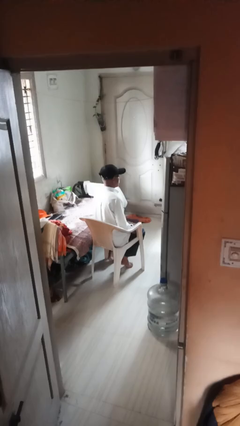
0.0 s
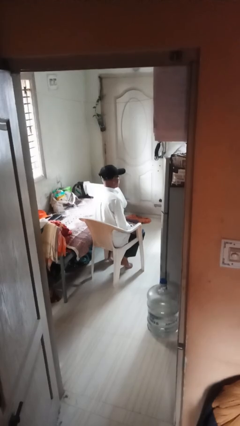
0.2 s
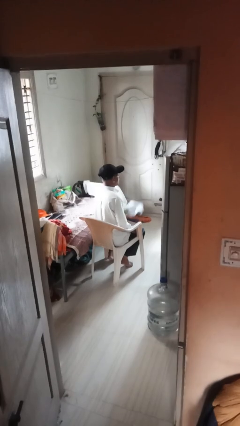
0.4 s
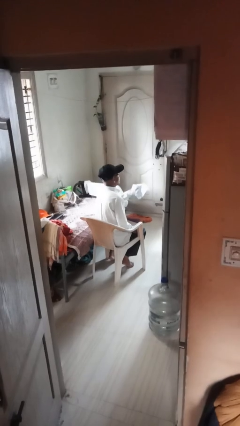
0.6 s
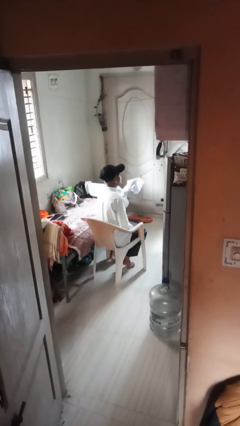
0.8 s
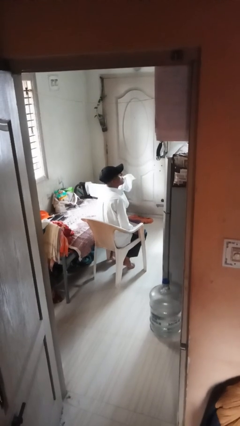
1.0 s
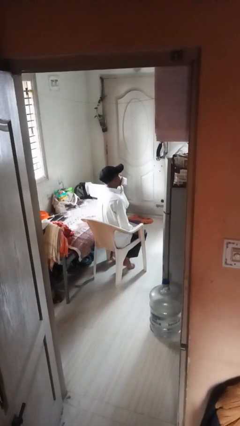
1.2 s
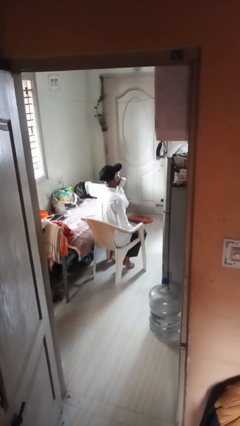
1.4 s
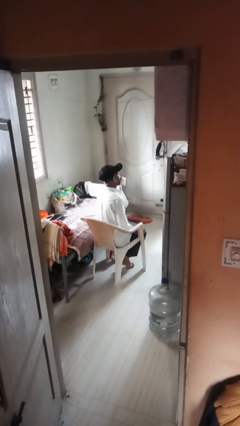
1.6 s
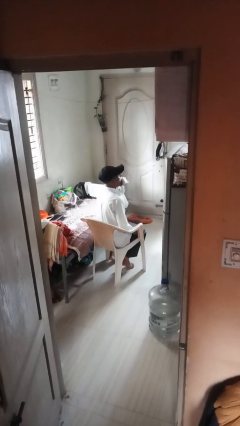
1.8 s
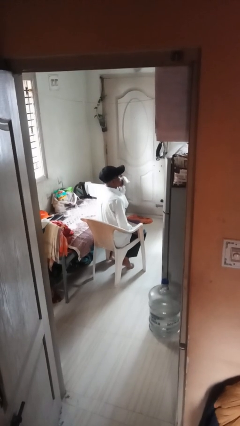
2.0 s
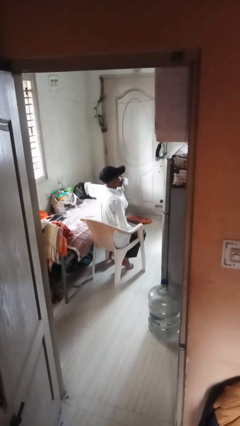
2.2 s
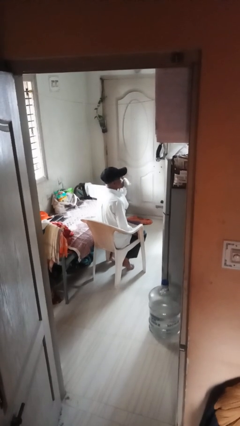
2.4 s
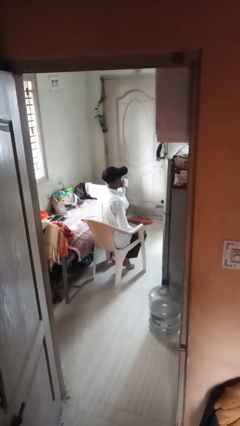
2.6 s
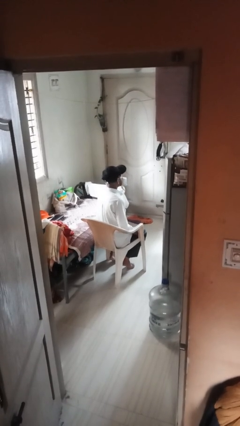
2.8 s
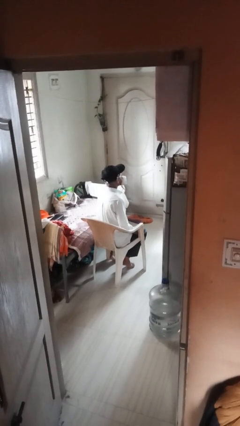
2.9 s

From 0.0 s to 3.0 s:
person wipes mouth with napkin

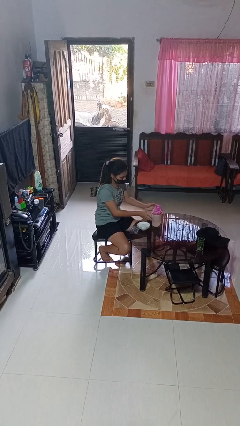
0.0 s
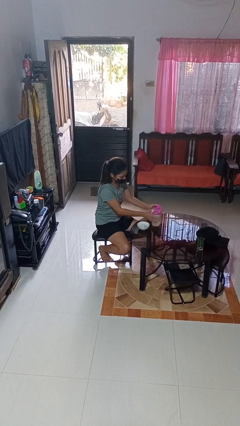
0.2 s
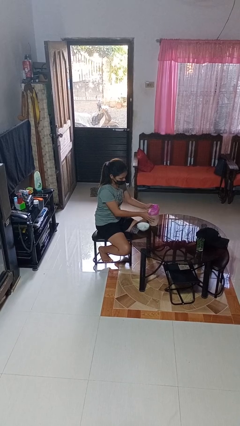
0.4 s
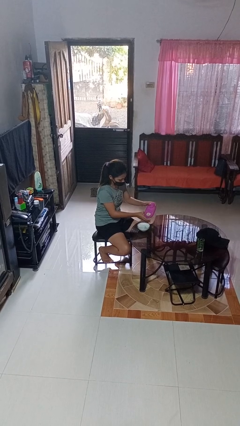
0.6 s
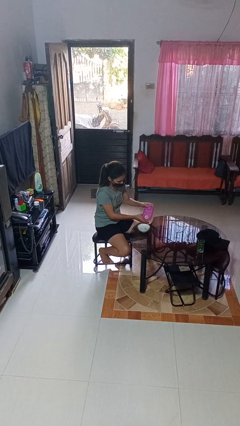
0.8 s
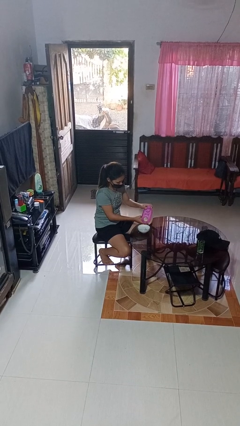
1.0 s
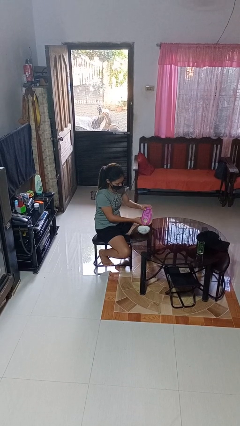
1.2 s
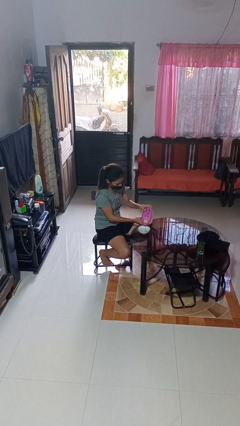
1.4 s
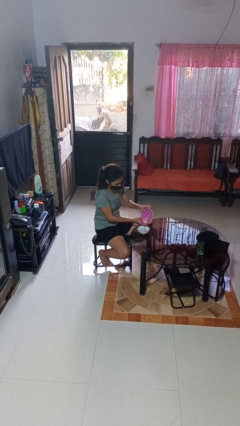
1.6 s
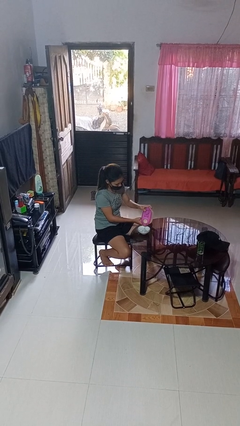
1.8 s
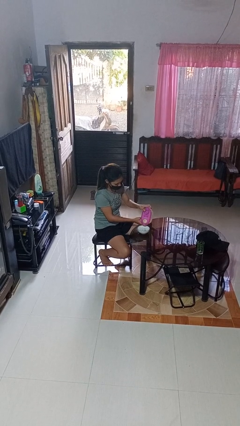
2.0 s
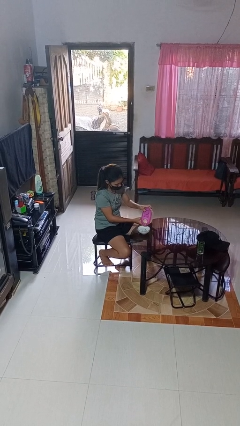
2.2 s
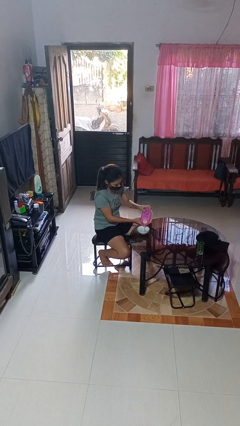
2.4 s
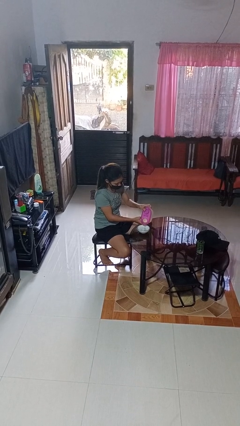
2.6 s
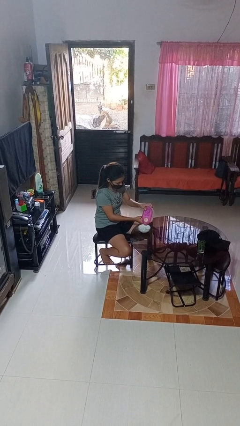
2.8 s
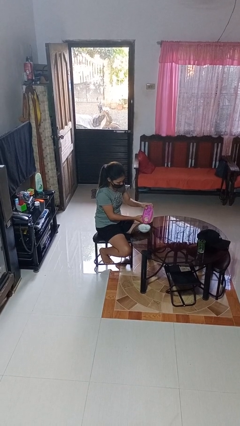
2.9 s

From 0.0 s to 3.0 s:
person pours into bowl

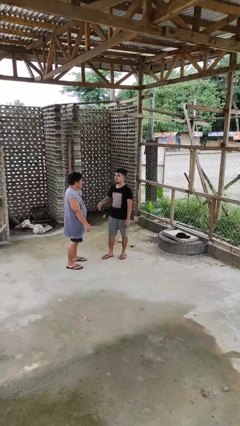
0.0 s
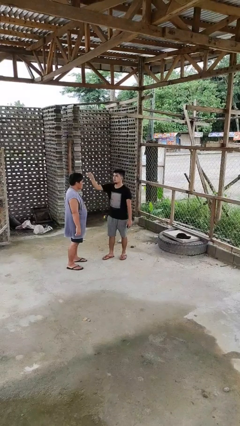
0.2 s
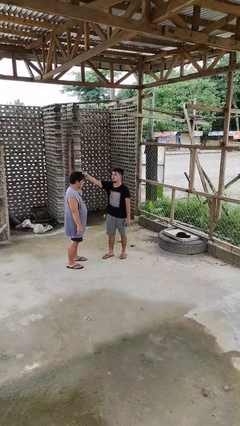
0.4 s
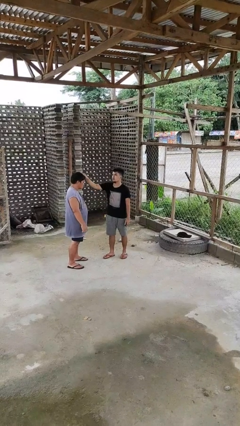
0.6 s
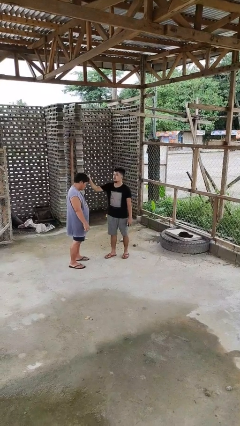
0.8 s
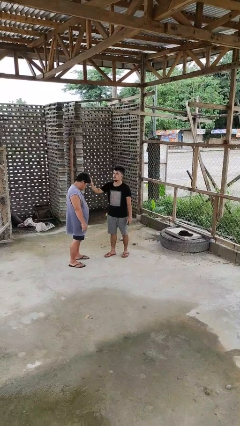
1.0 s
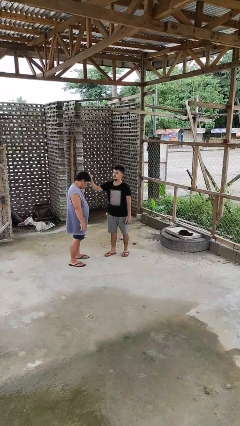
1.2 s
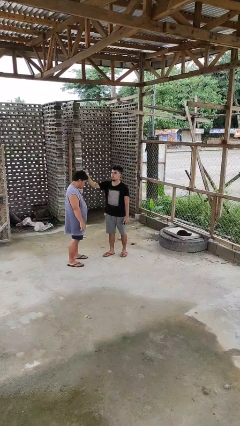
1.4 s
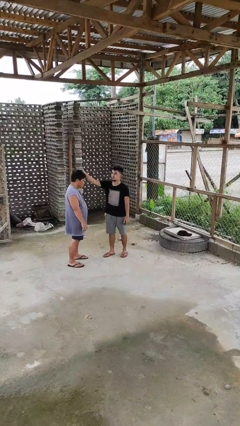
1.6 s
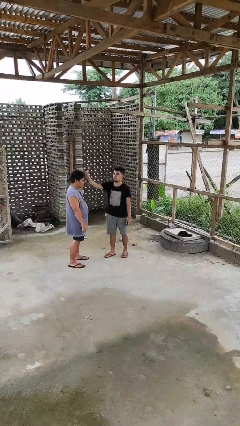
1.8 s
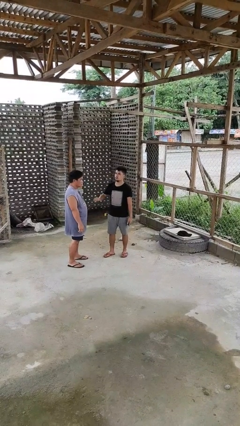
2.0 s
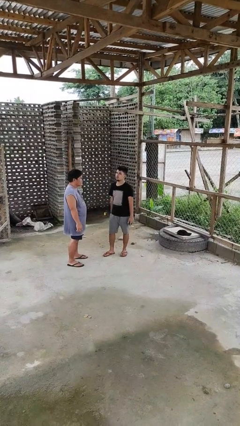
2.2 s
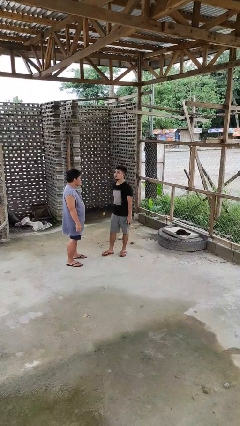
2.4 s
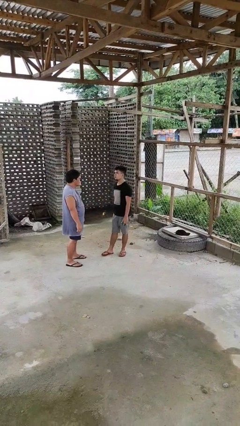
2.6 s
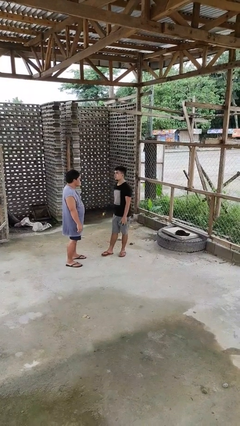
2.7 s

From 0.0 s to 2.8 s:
person grabs person by hair

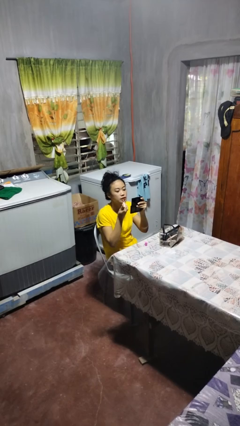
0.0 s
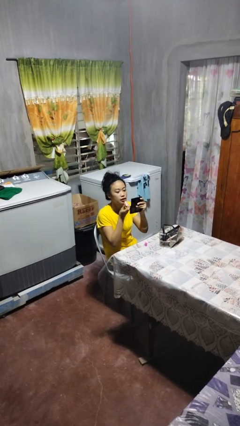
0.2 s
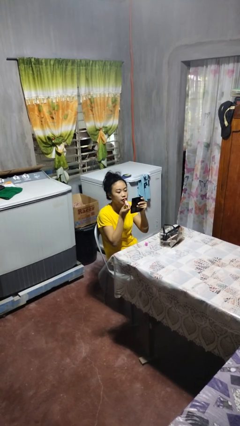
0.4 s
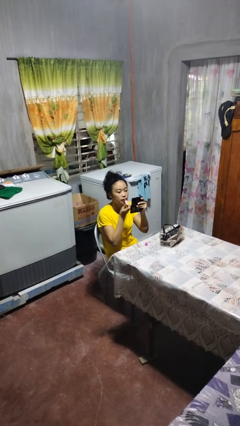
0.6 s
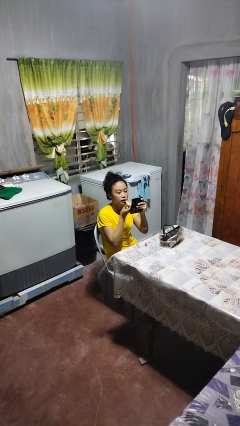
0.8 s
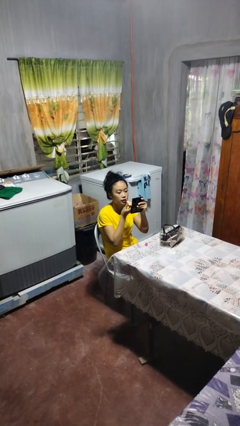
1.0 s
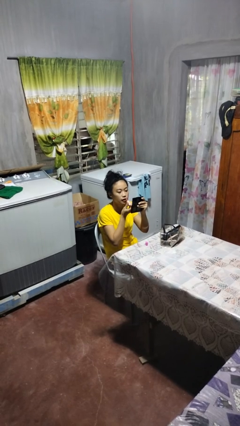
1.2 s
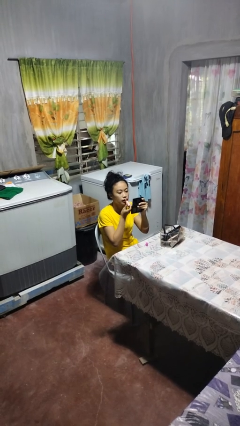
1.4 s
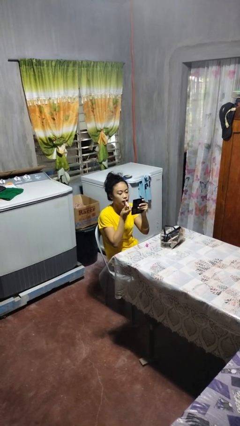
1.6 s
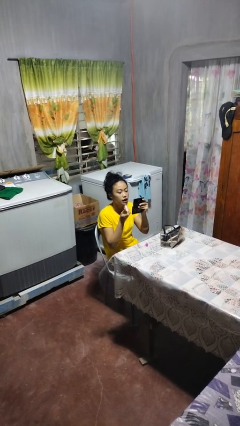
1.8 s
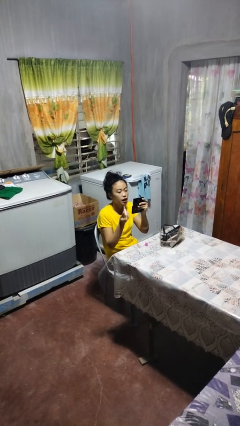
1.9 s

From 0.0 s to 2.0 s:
person applies lip makeup

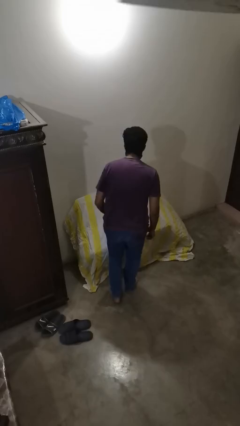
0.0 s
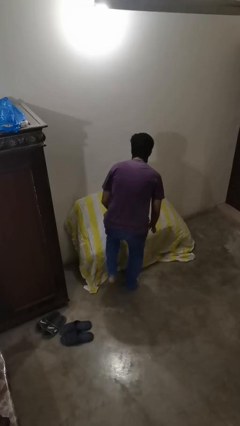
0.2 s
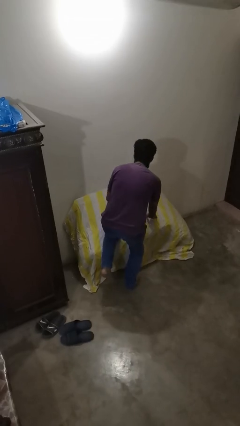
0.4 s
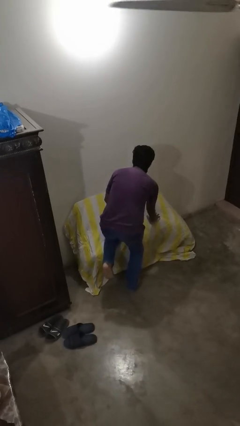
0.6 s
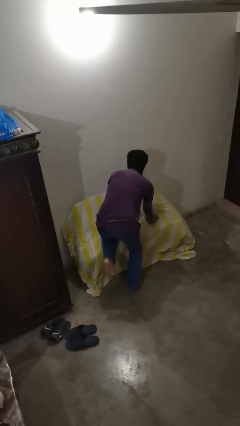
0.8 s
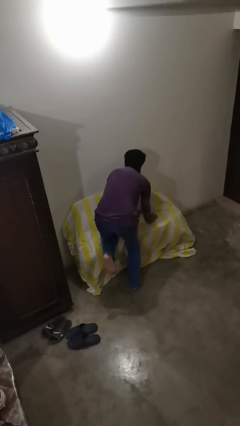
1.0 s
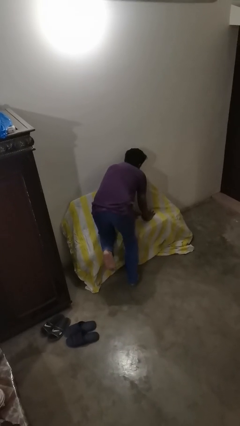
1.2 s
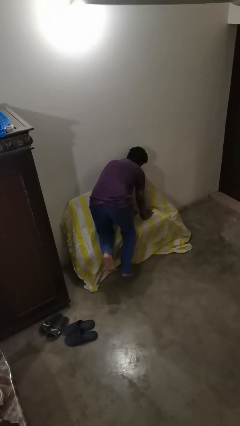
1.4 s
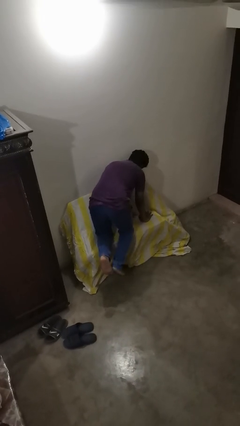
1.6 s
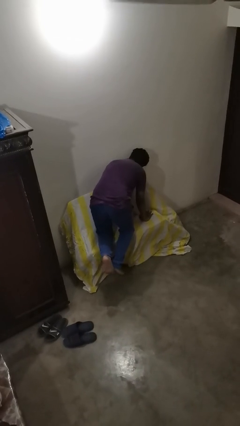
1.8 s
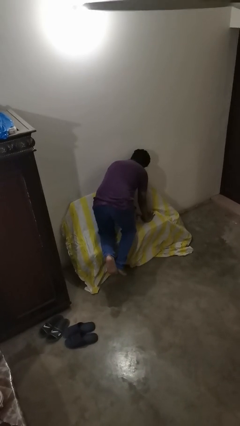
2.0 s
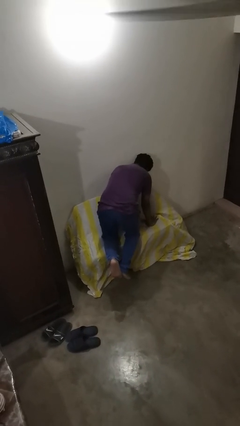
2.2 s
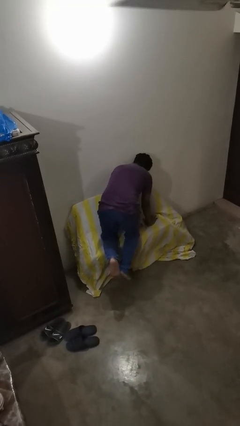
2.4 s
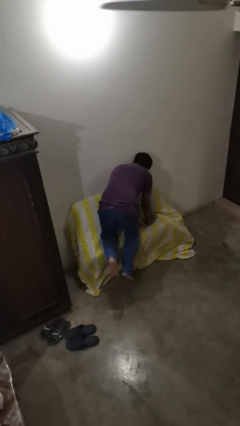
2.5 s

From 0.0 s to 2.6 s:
person lies down on couch

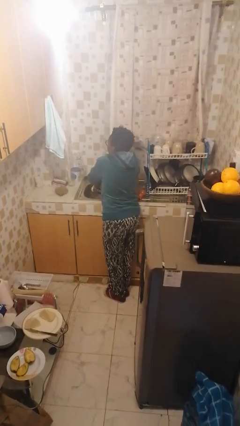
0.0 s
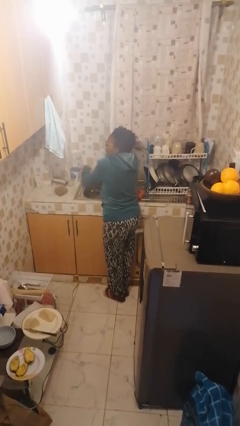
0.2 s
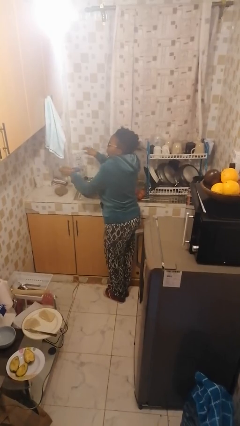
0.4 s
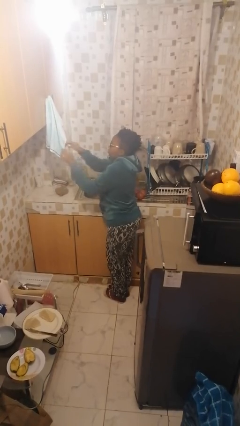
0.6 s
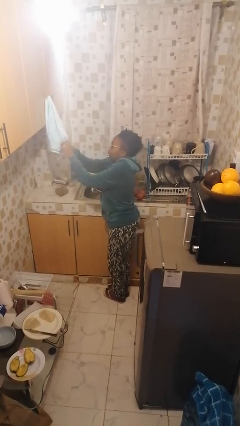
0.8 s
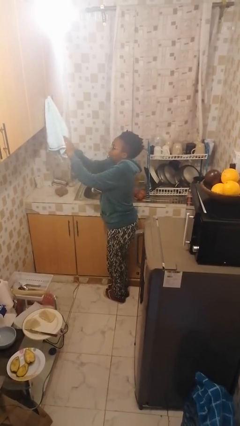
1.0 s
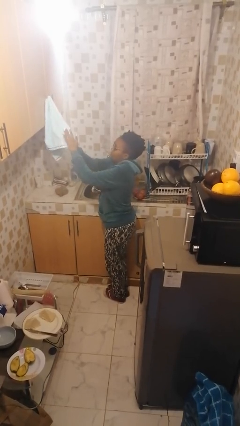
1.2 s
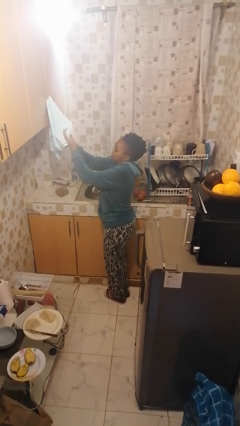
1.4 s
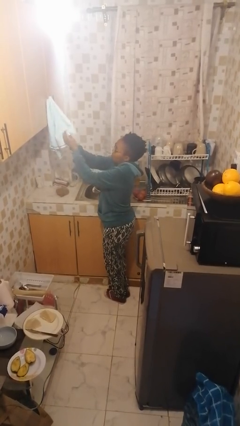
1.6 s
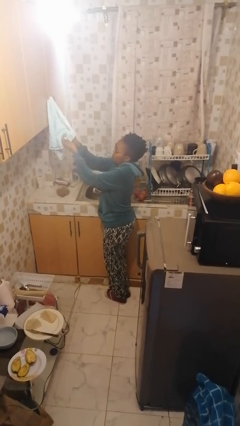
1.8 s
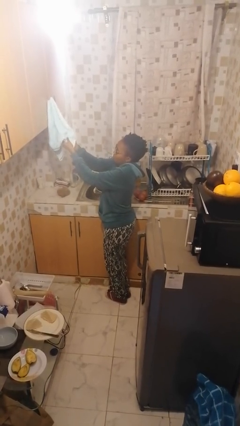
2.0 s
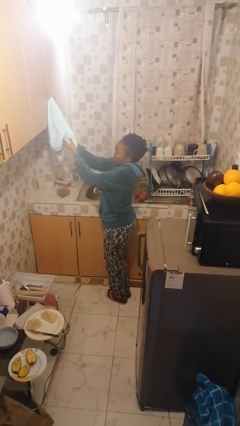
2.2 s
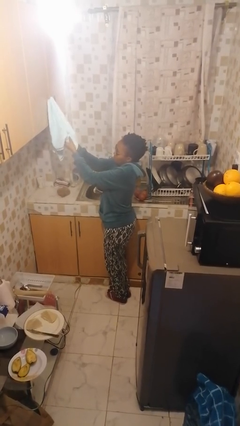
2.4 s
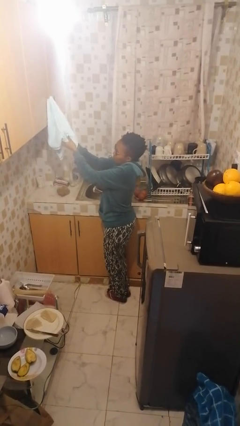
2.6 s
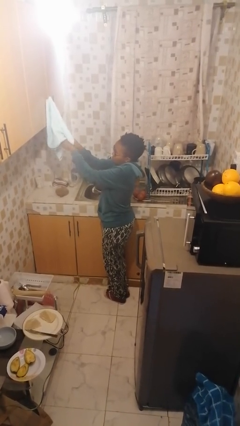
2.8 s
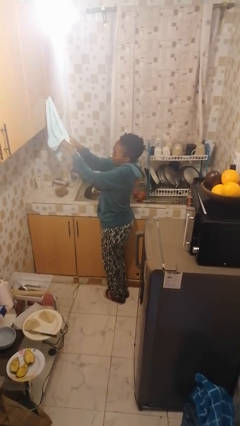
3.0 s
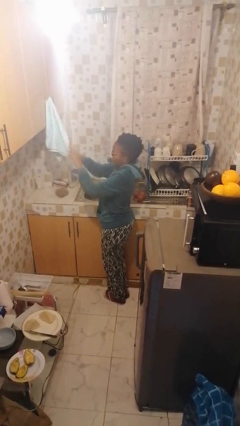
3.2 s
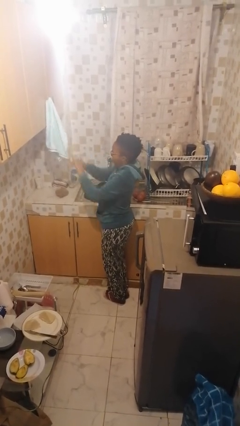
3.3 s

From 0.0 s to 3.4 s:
person dries hands with towel

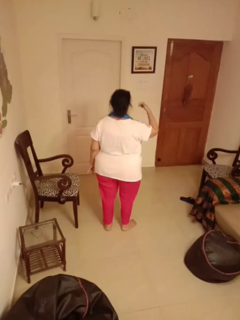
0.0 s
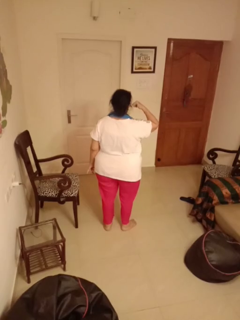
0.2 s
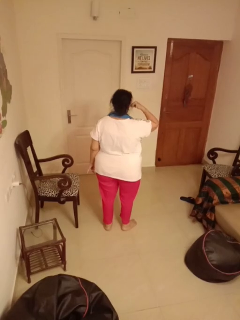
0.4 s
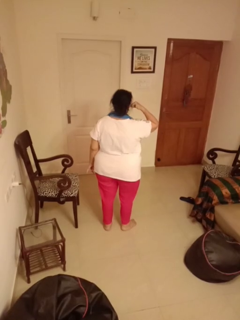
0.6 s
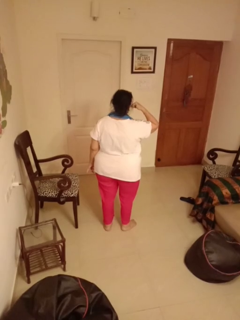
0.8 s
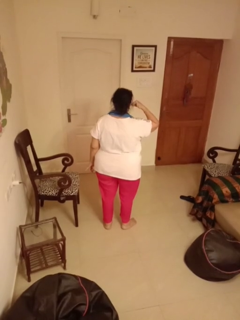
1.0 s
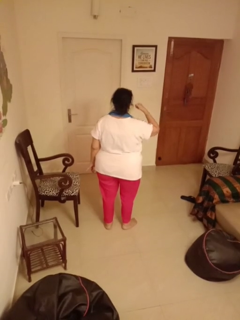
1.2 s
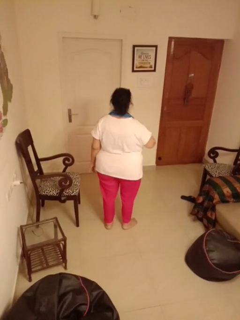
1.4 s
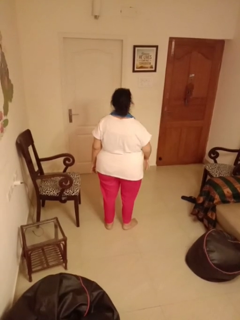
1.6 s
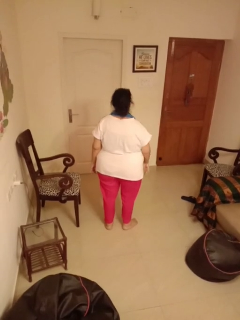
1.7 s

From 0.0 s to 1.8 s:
person gestures call me
